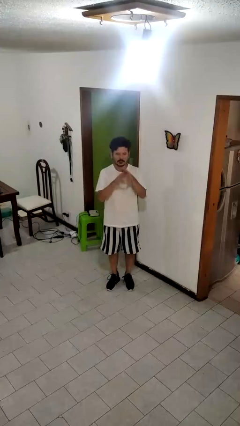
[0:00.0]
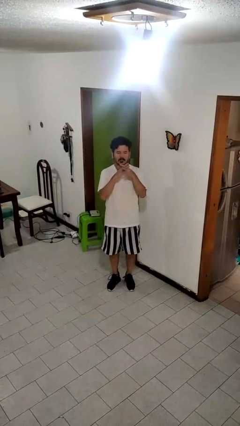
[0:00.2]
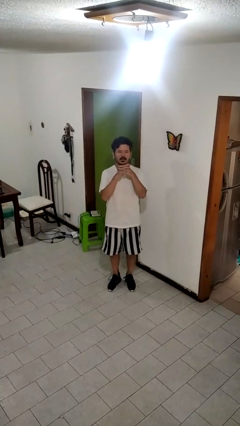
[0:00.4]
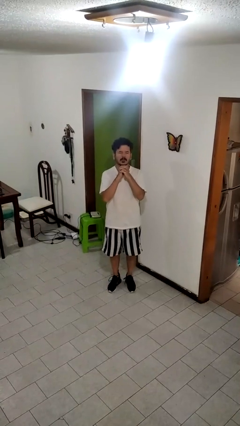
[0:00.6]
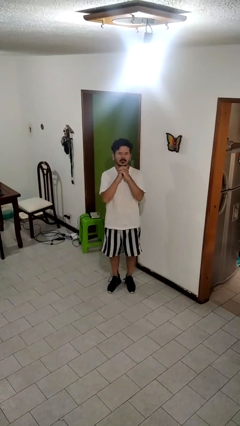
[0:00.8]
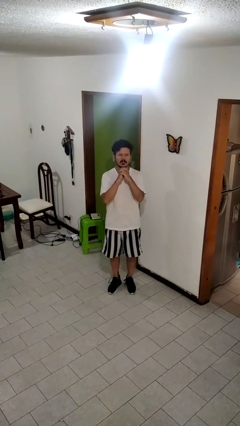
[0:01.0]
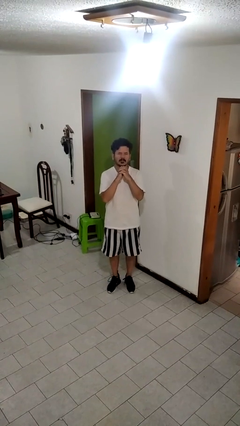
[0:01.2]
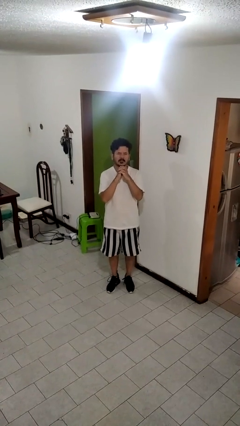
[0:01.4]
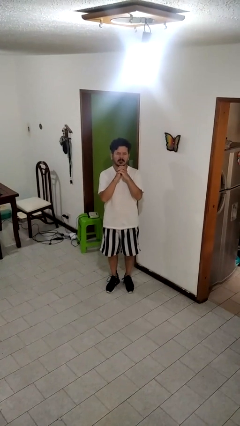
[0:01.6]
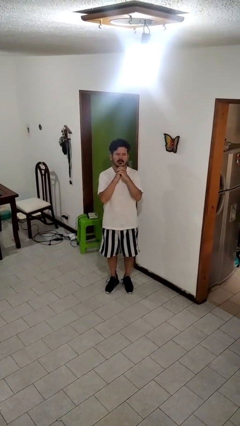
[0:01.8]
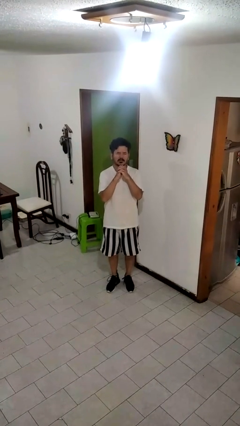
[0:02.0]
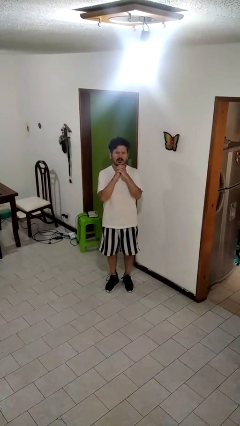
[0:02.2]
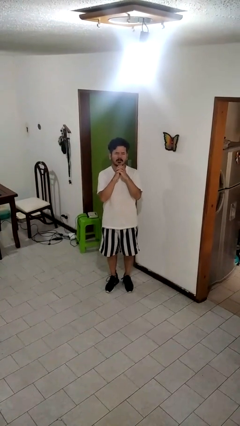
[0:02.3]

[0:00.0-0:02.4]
person prays

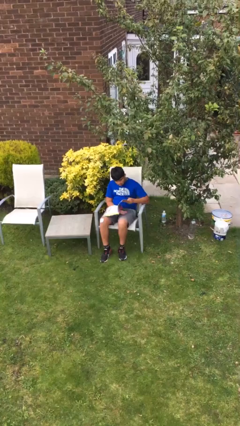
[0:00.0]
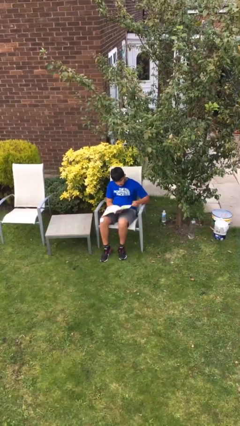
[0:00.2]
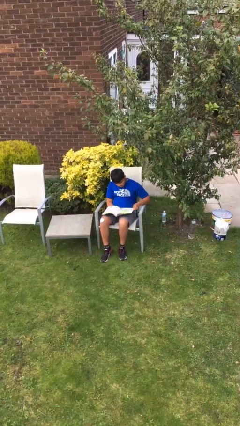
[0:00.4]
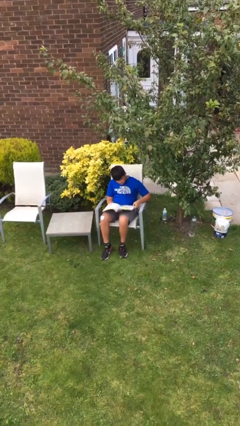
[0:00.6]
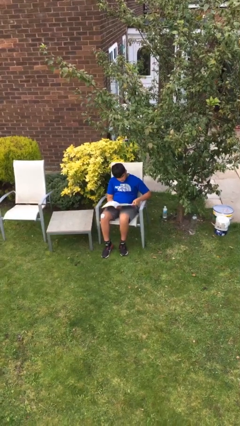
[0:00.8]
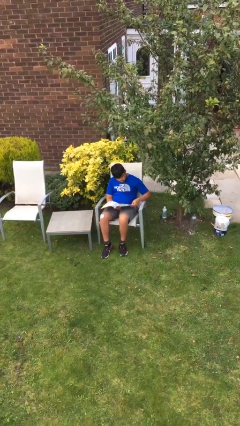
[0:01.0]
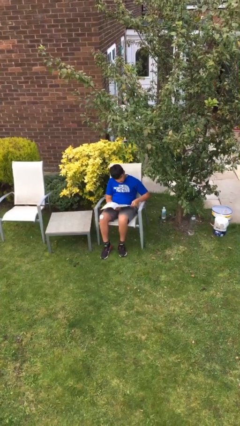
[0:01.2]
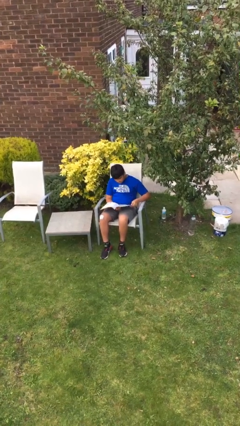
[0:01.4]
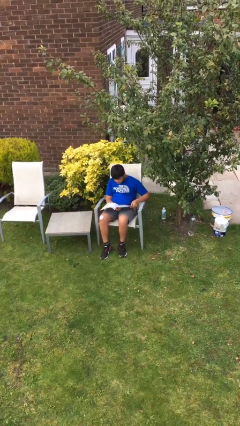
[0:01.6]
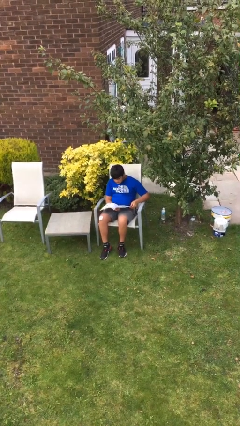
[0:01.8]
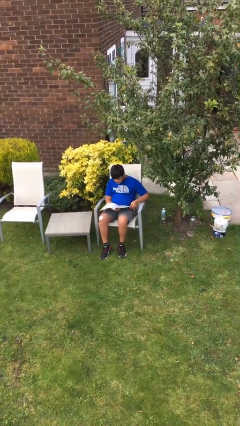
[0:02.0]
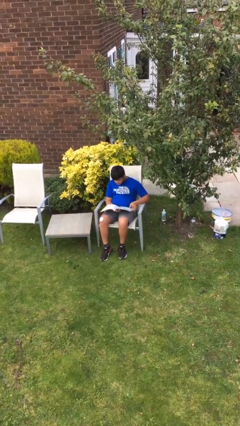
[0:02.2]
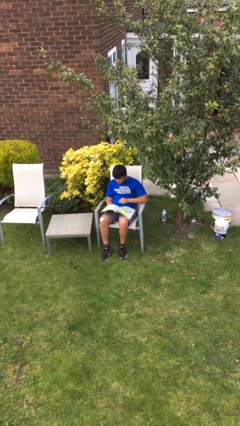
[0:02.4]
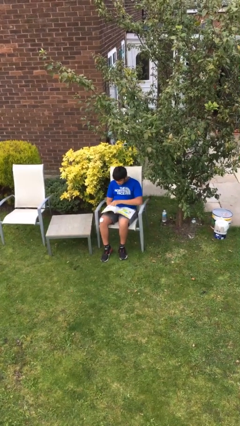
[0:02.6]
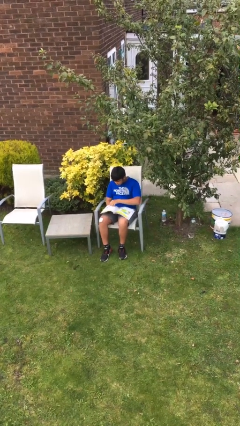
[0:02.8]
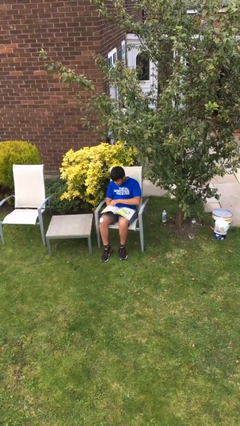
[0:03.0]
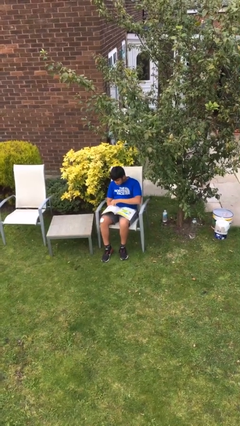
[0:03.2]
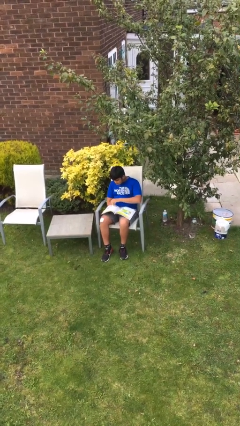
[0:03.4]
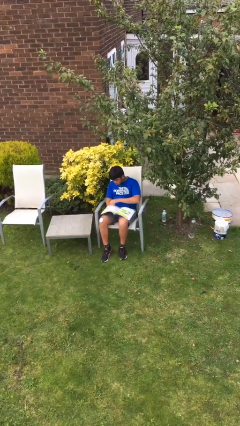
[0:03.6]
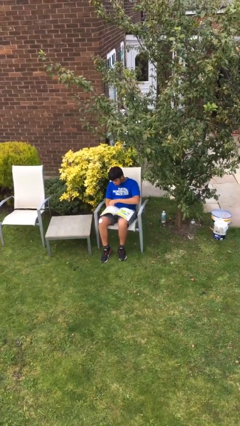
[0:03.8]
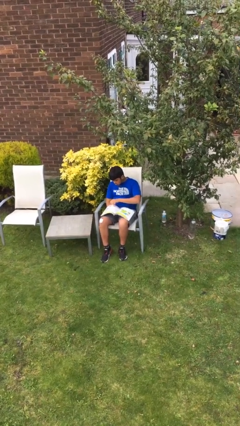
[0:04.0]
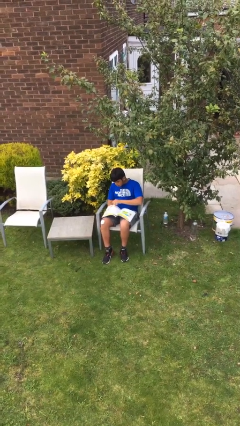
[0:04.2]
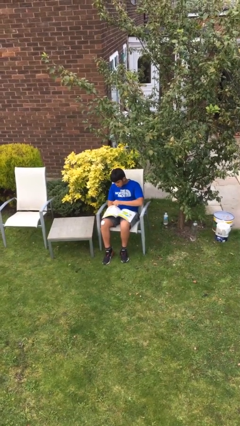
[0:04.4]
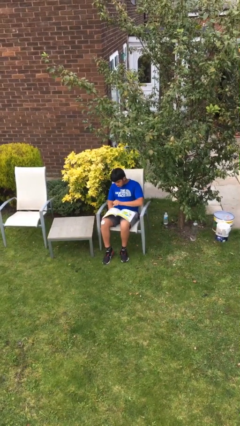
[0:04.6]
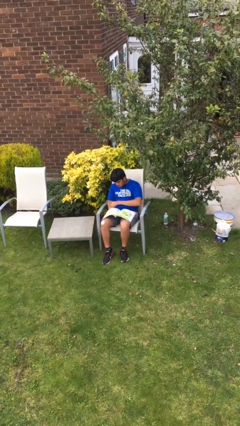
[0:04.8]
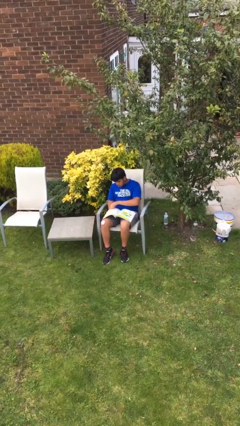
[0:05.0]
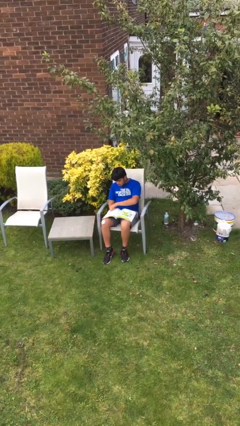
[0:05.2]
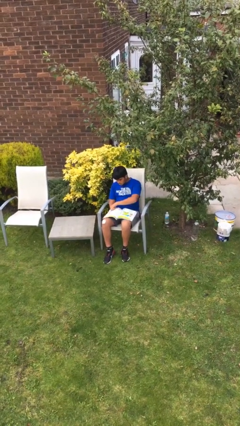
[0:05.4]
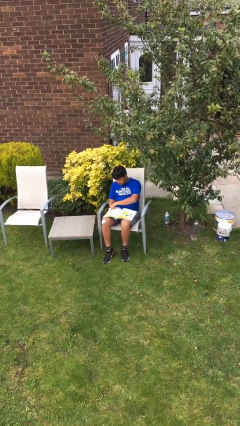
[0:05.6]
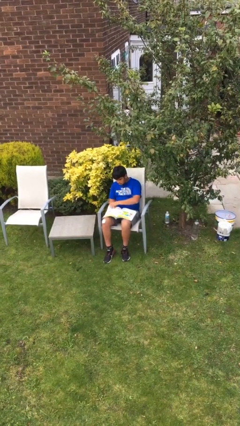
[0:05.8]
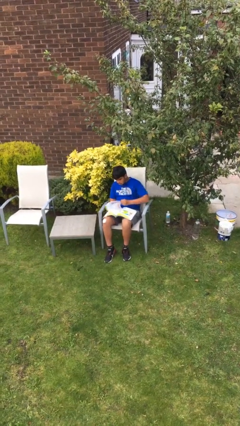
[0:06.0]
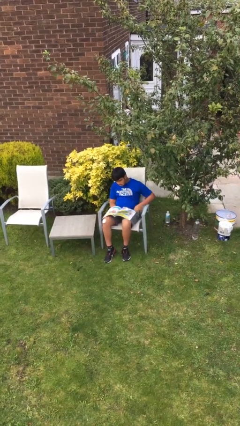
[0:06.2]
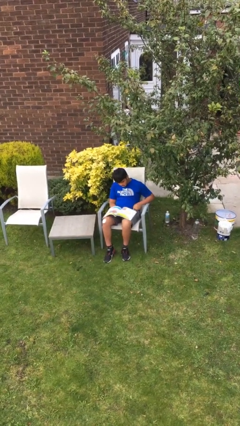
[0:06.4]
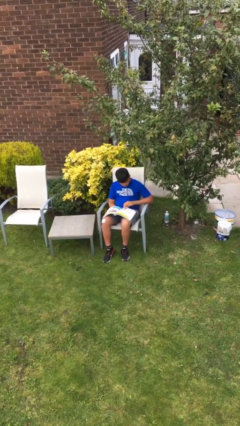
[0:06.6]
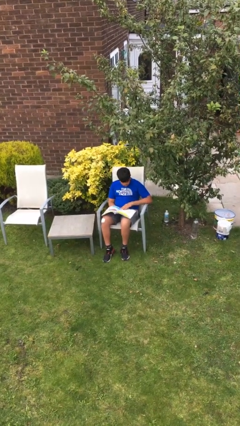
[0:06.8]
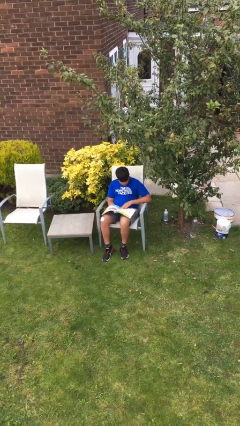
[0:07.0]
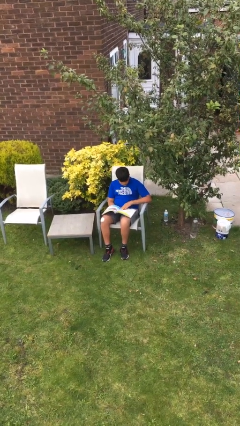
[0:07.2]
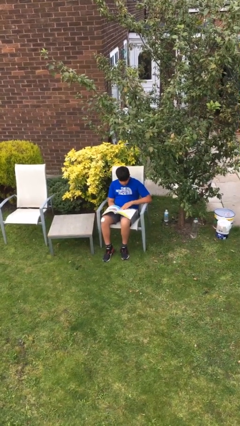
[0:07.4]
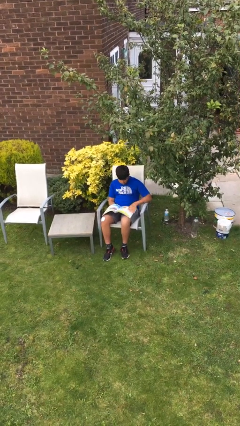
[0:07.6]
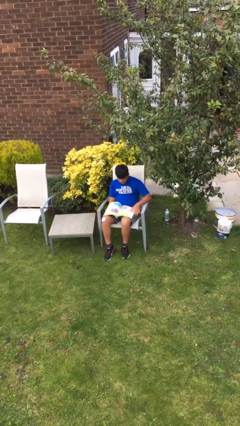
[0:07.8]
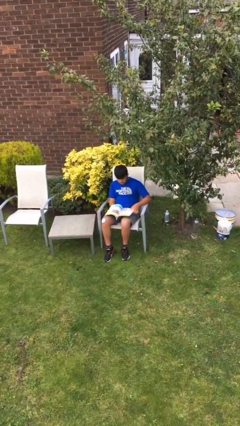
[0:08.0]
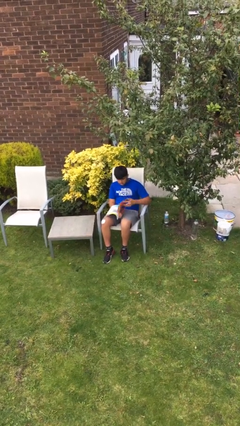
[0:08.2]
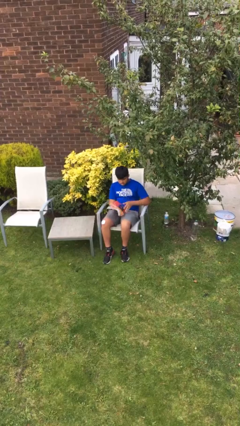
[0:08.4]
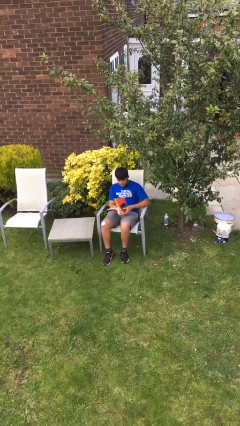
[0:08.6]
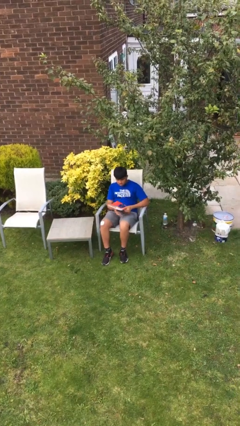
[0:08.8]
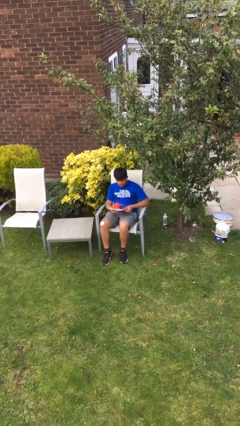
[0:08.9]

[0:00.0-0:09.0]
person reads document

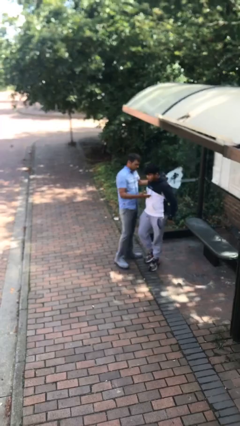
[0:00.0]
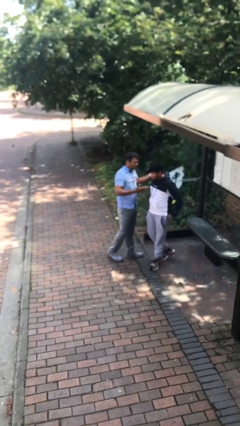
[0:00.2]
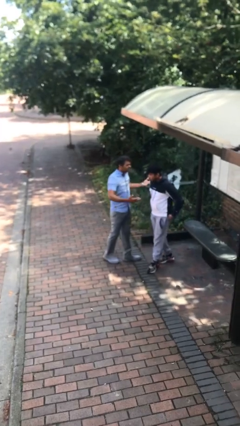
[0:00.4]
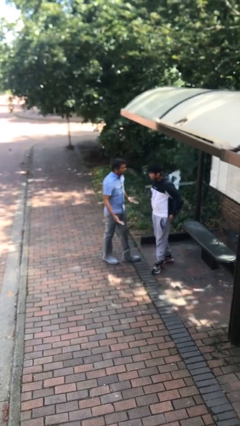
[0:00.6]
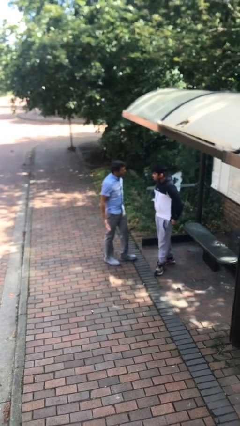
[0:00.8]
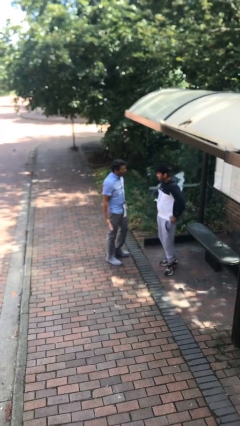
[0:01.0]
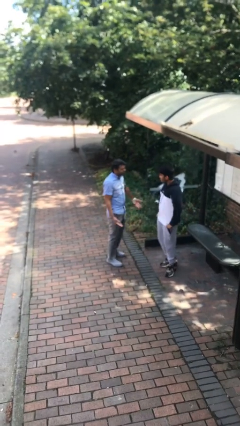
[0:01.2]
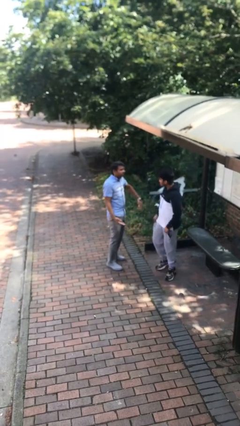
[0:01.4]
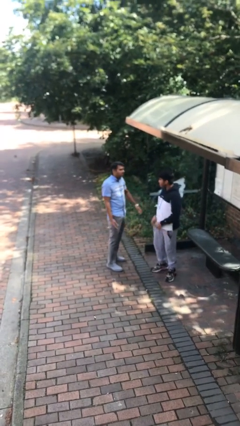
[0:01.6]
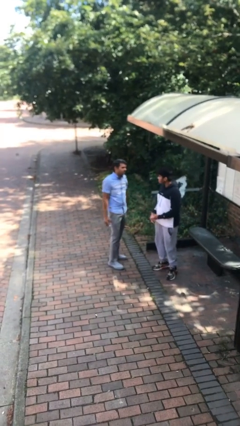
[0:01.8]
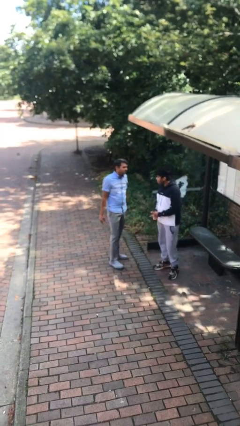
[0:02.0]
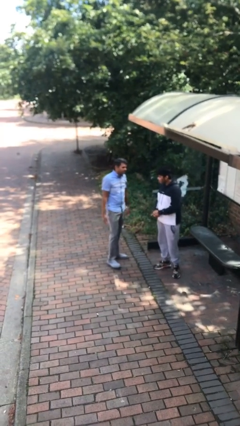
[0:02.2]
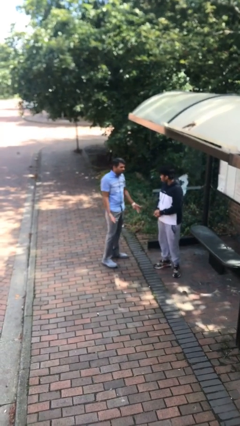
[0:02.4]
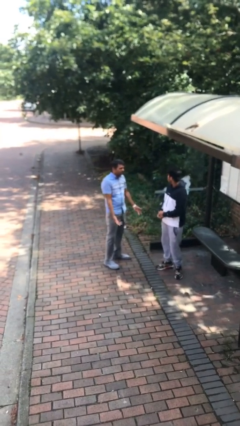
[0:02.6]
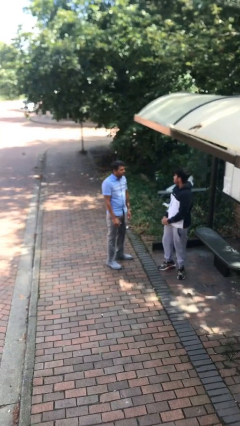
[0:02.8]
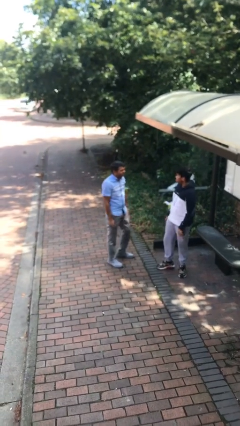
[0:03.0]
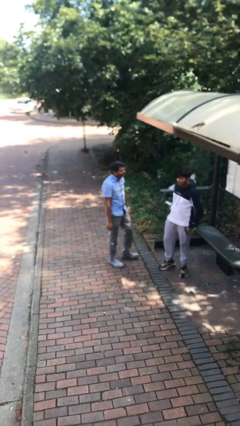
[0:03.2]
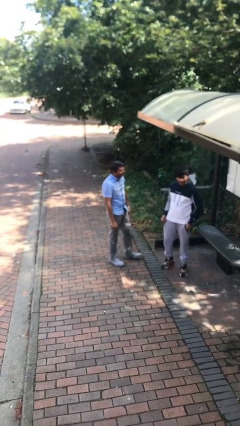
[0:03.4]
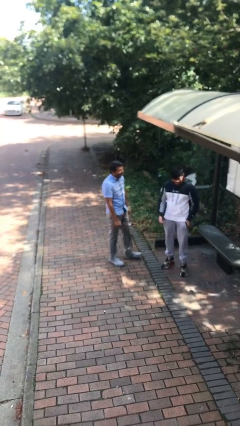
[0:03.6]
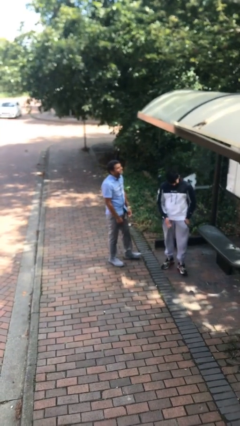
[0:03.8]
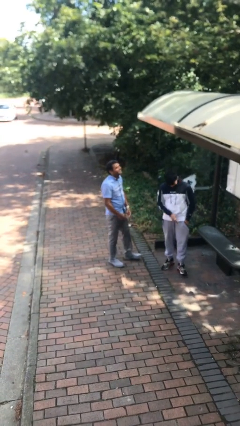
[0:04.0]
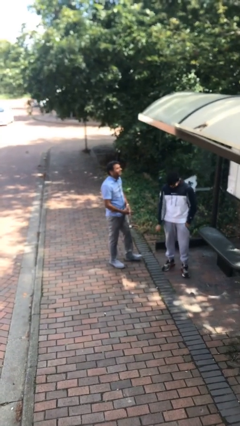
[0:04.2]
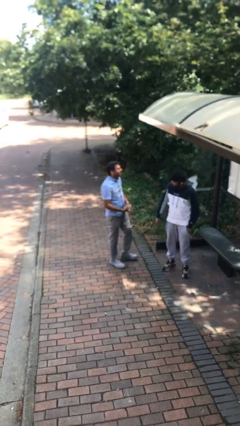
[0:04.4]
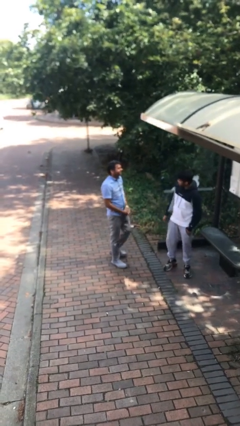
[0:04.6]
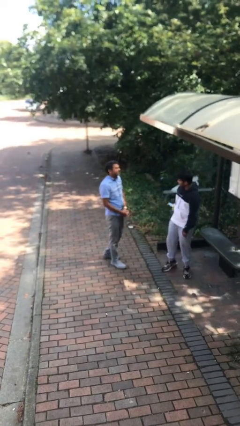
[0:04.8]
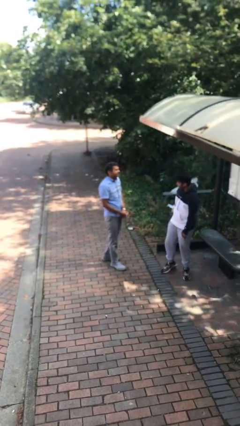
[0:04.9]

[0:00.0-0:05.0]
person talks to person

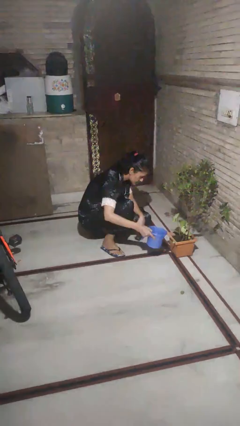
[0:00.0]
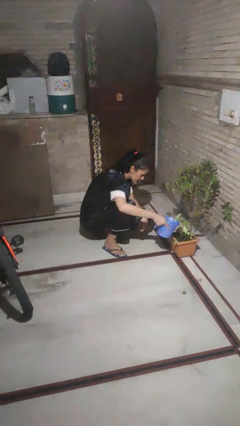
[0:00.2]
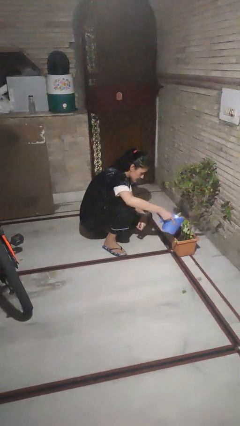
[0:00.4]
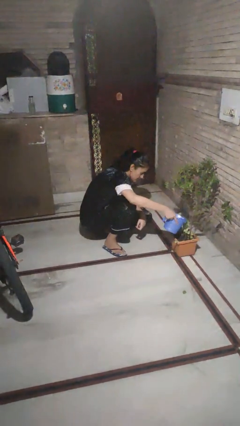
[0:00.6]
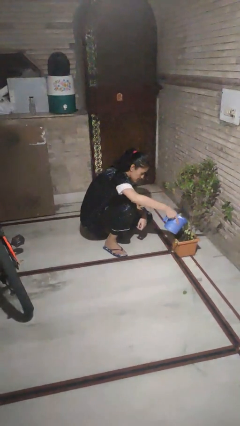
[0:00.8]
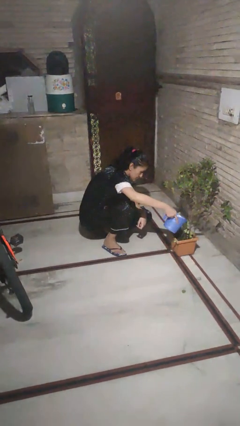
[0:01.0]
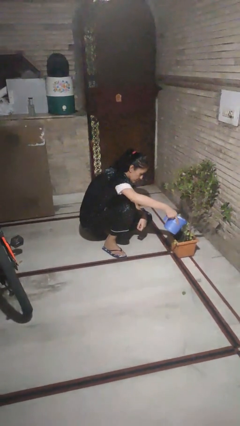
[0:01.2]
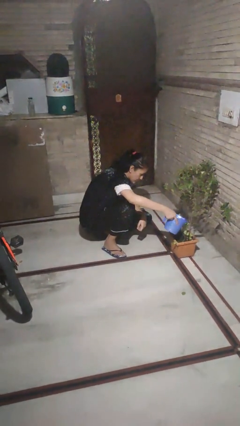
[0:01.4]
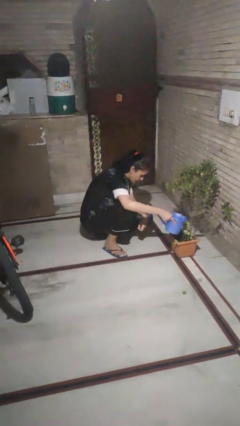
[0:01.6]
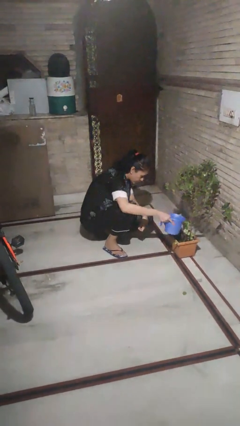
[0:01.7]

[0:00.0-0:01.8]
person waters houseplant
